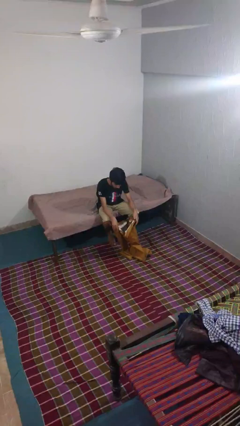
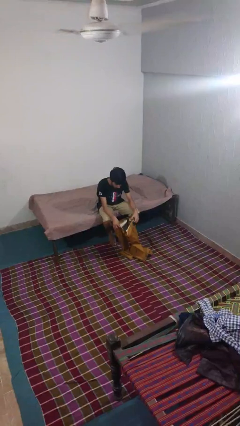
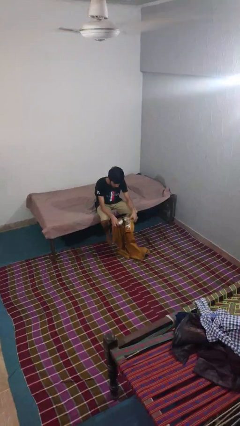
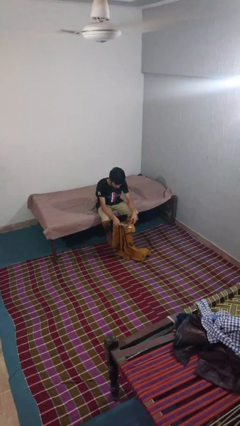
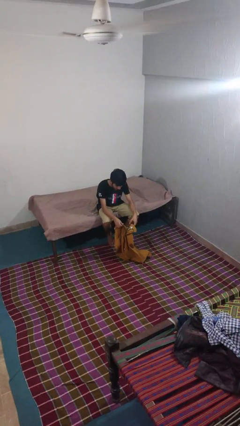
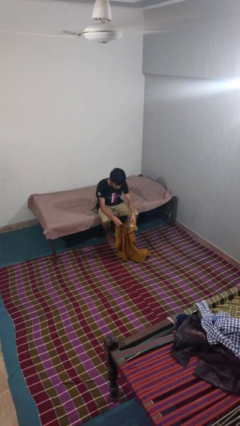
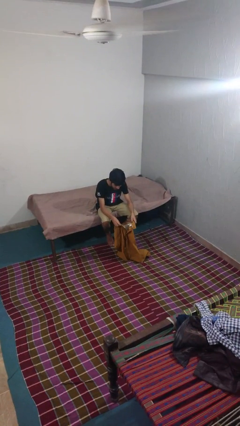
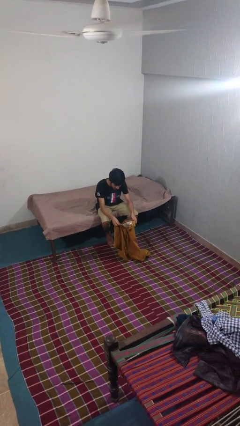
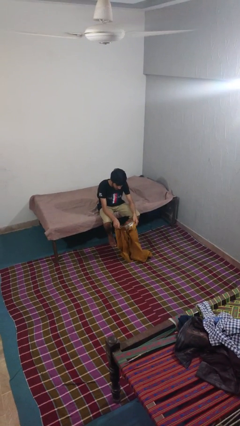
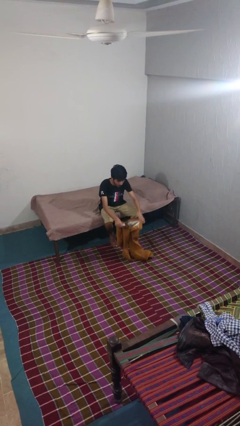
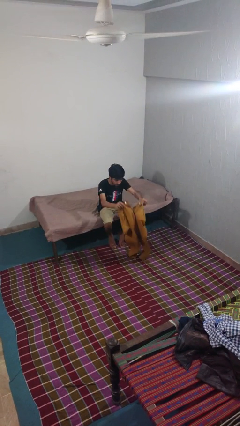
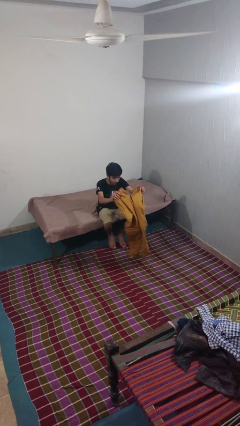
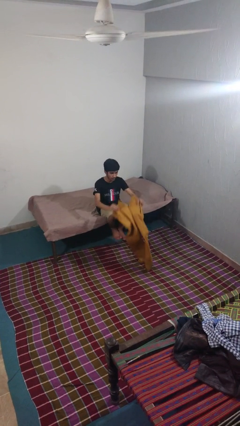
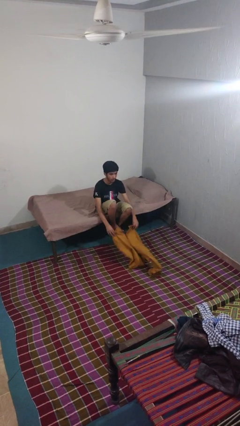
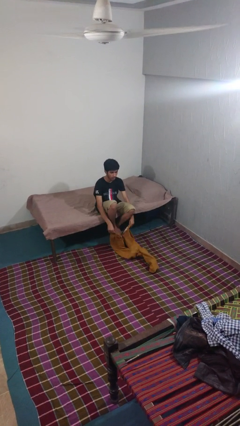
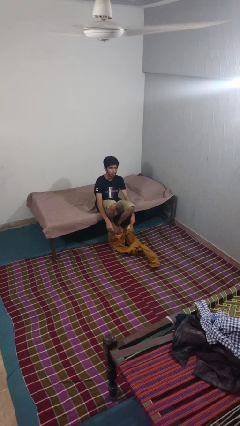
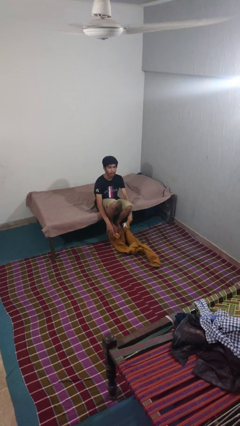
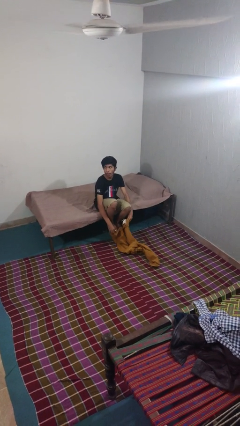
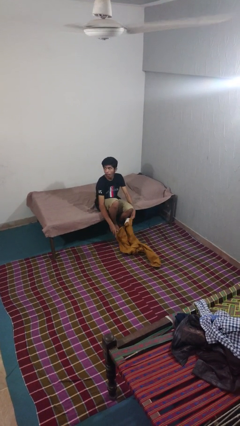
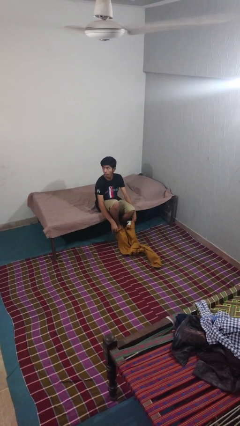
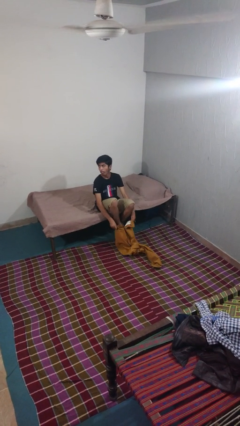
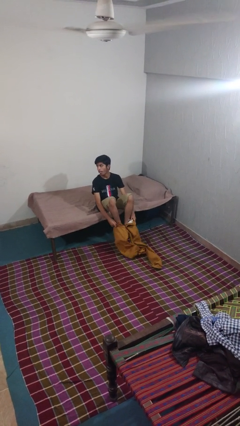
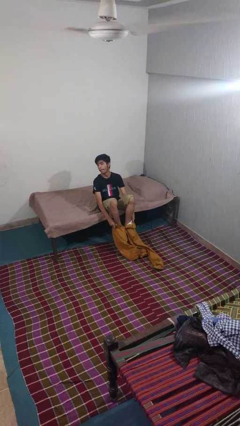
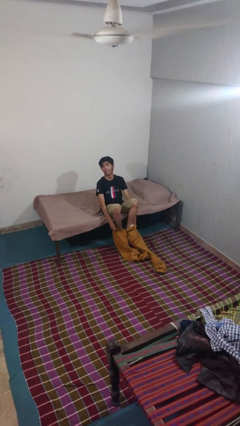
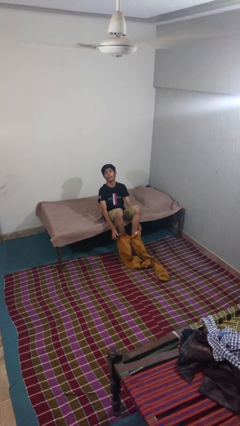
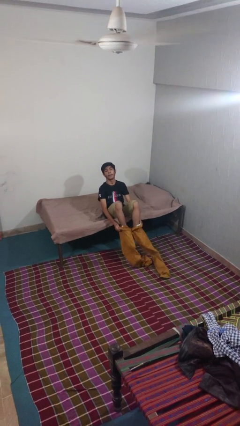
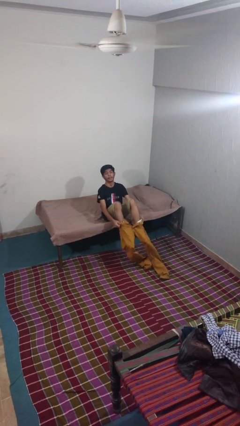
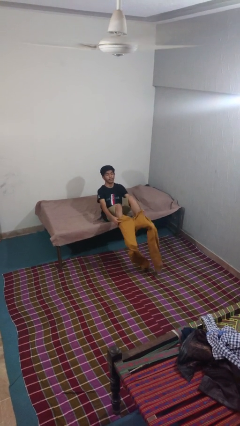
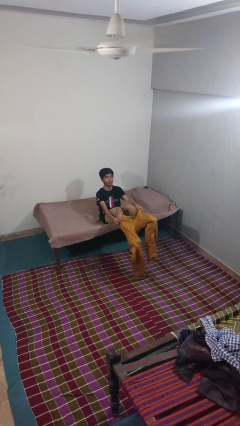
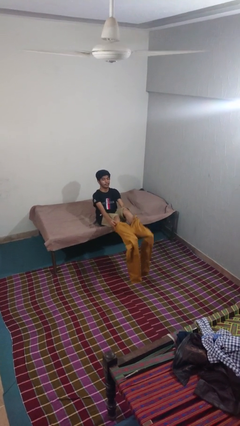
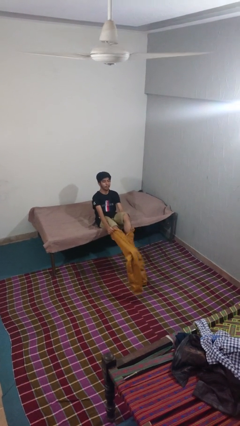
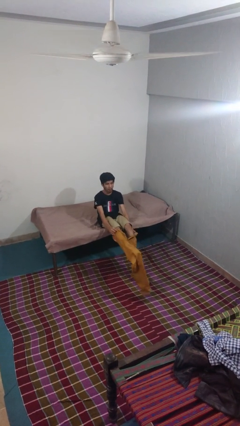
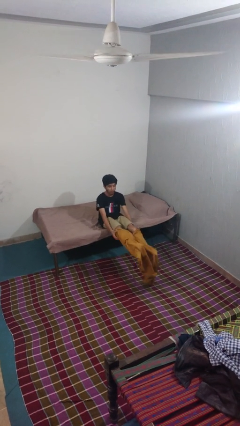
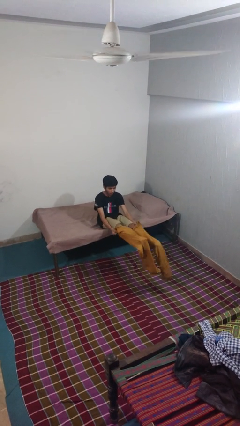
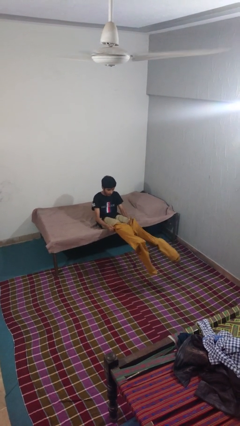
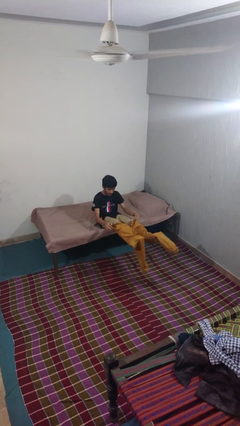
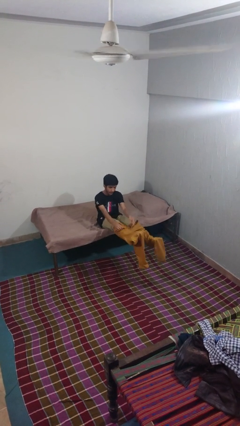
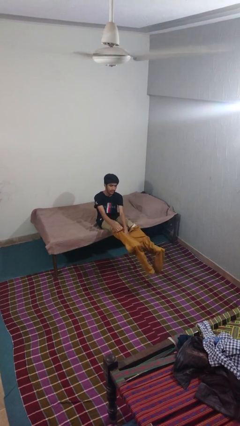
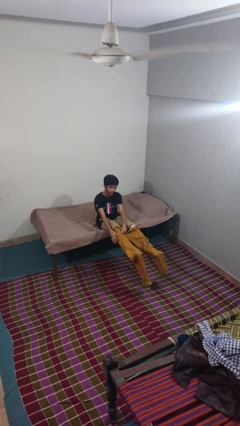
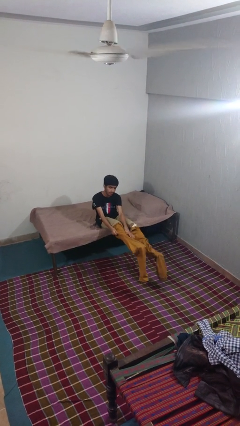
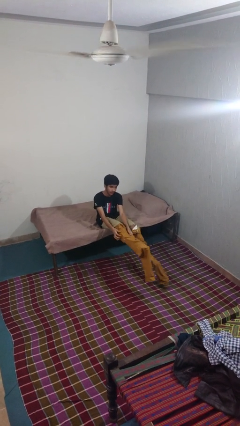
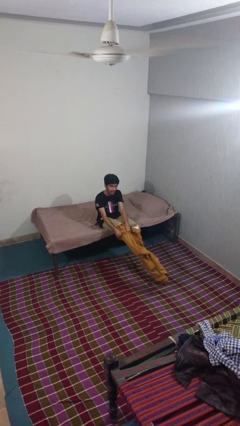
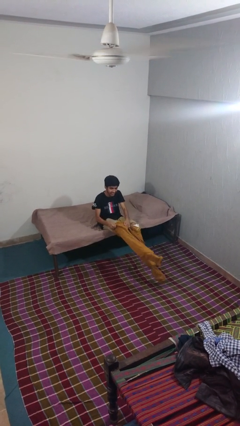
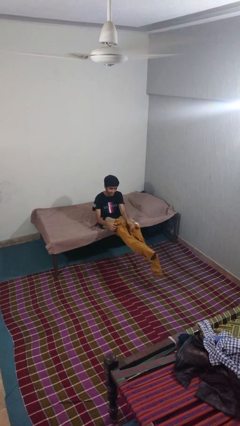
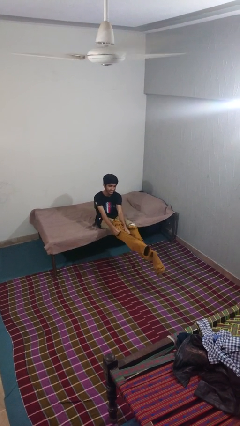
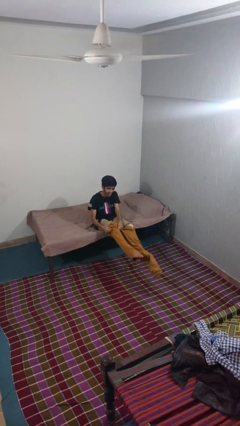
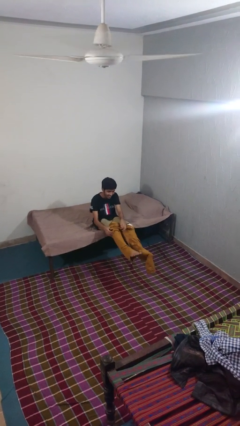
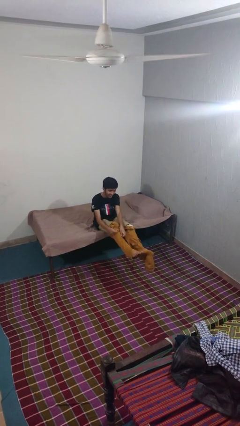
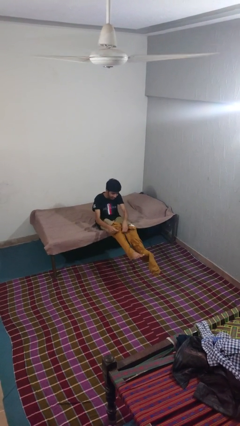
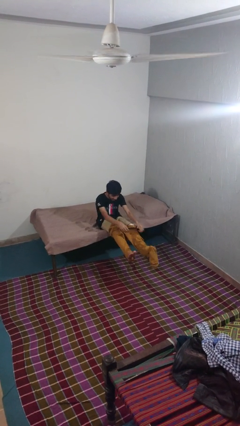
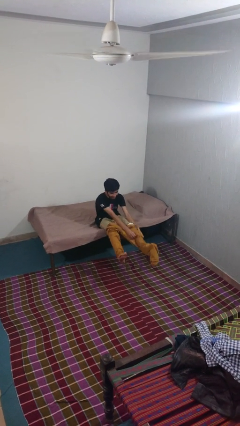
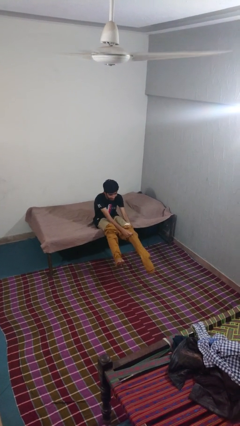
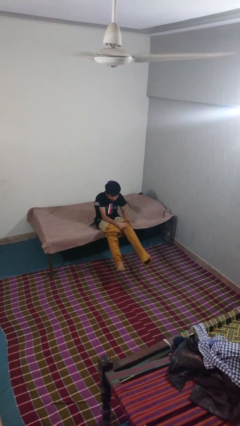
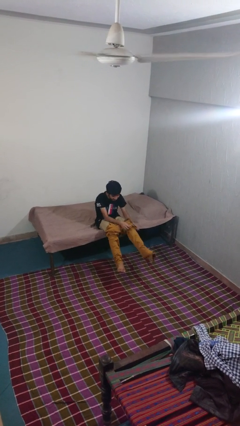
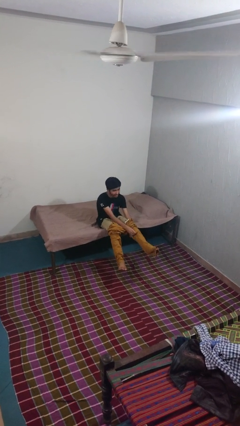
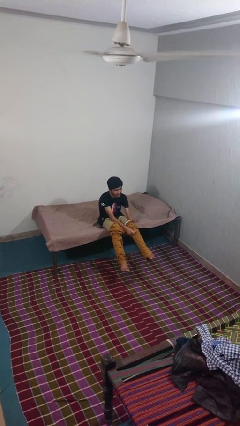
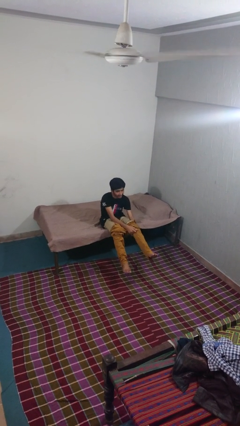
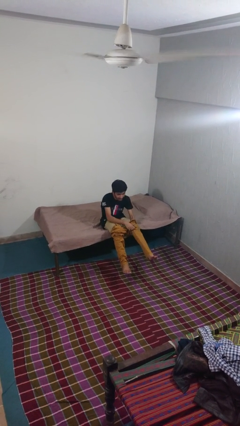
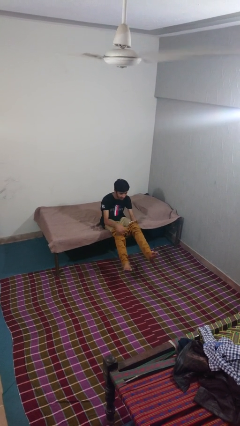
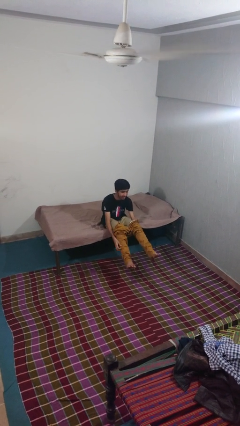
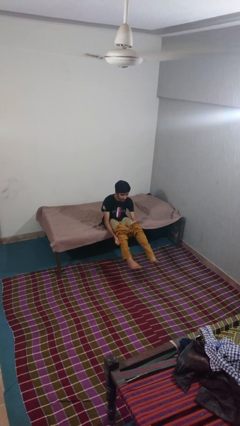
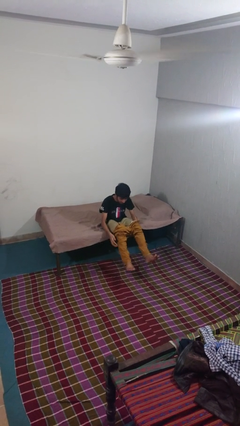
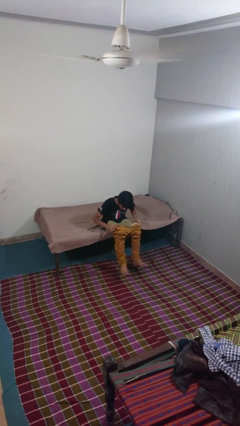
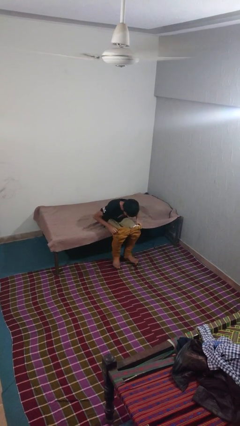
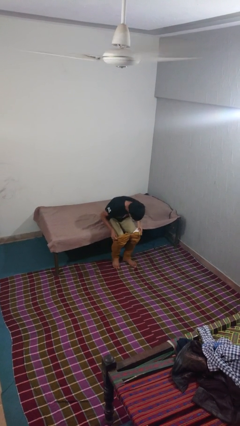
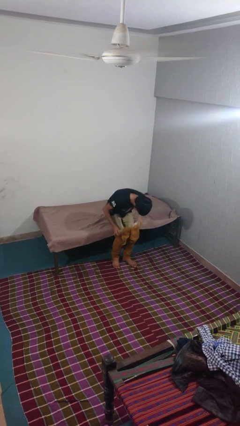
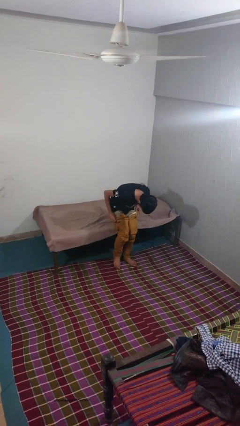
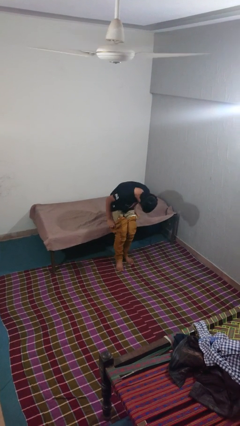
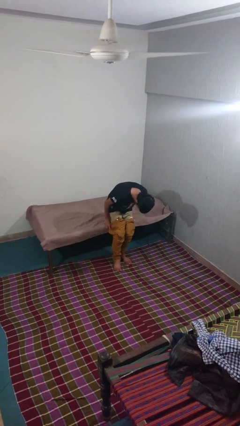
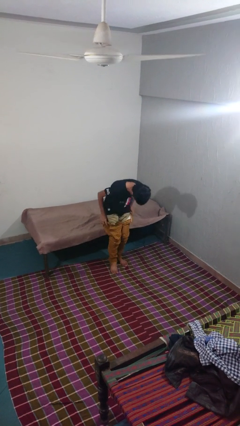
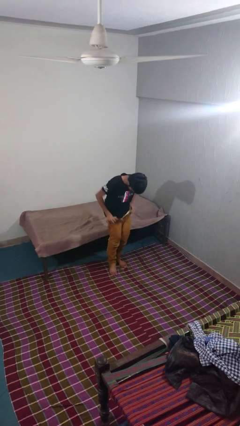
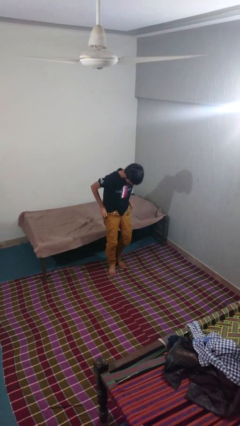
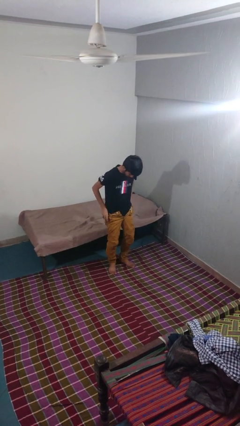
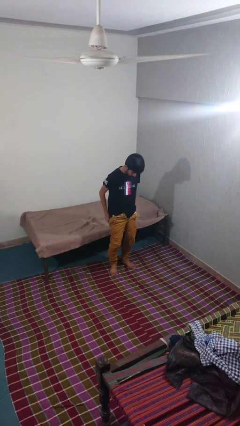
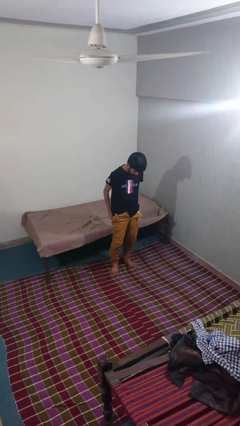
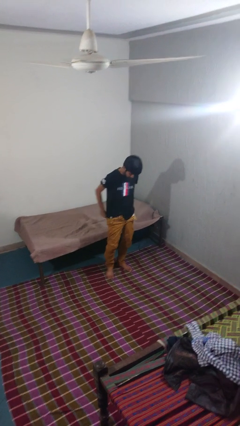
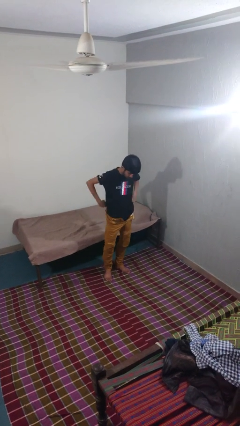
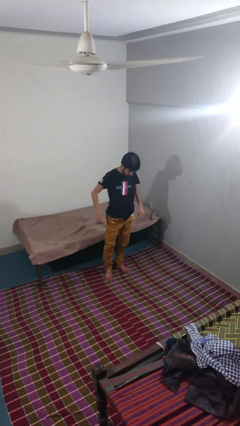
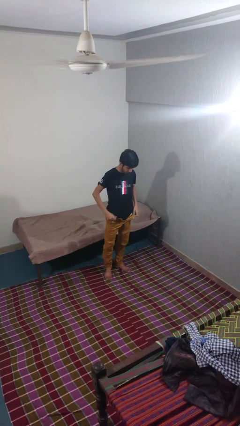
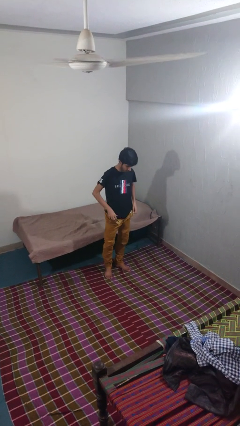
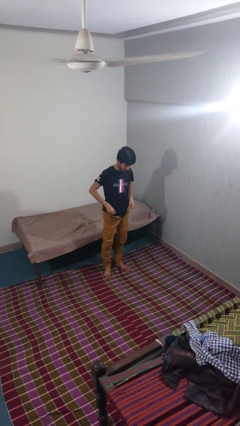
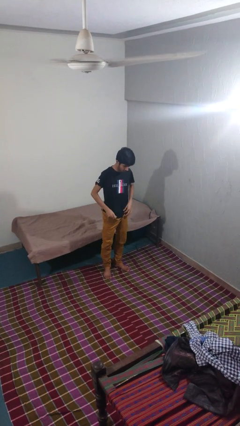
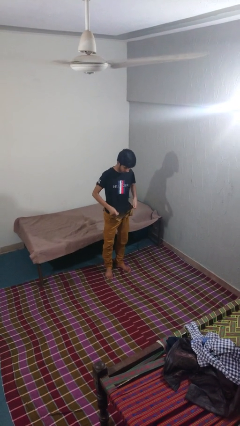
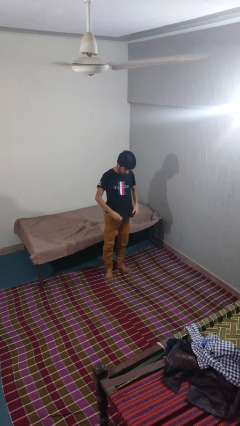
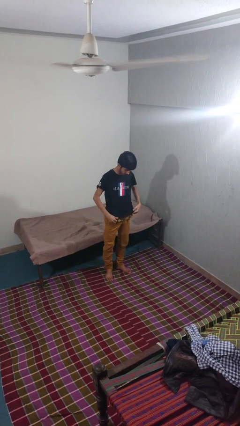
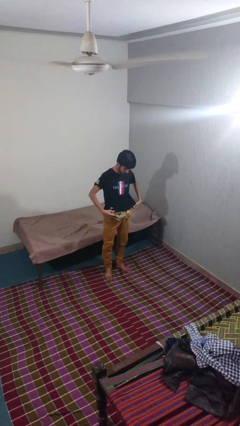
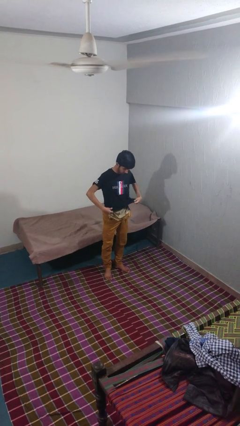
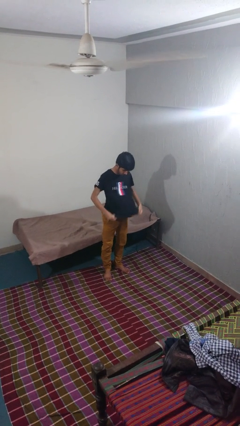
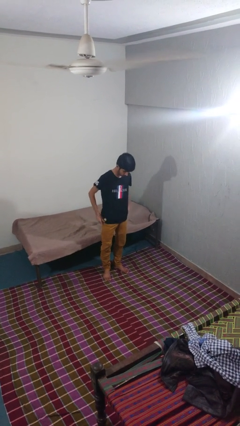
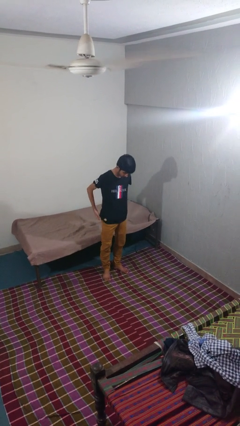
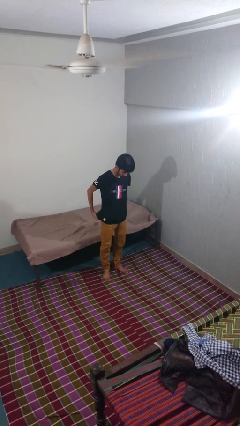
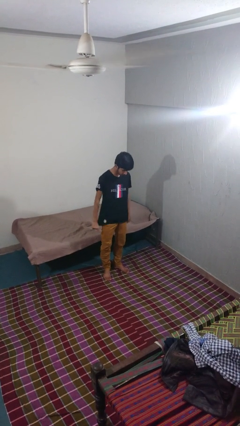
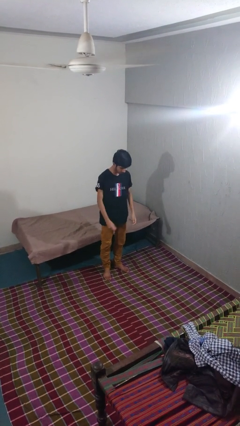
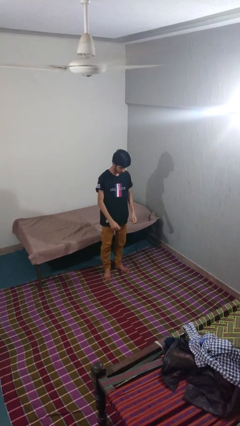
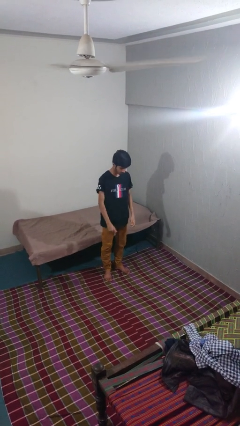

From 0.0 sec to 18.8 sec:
person puts on pants
